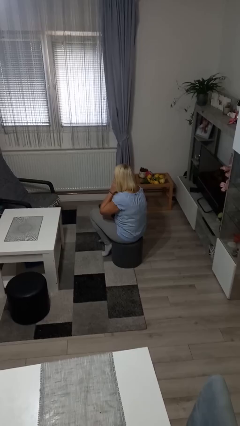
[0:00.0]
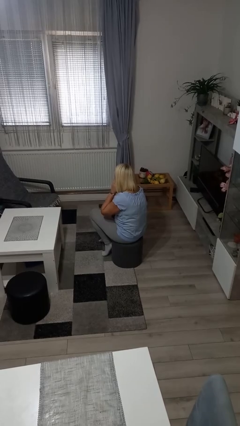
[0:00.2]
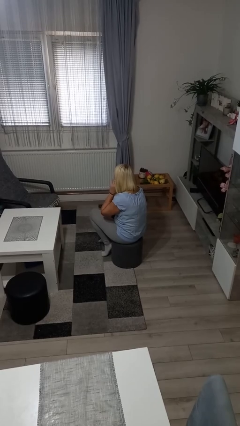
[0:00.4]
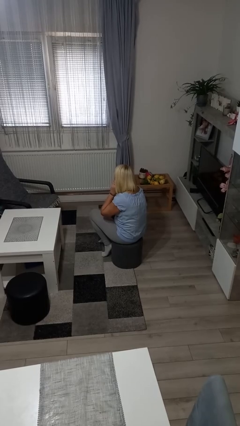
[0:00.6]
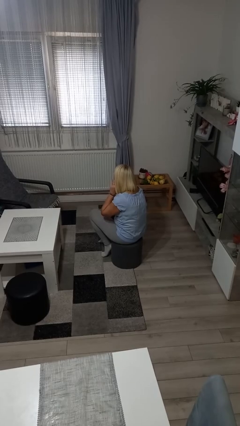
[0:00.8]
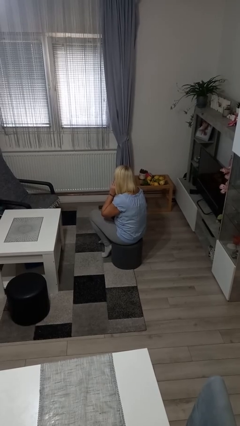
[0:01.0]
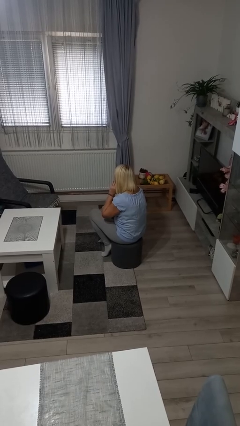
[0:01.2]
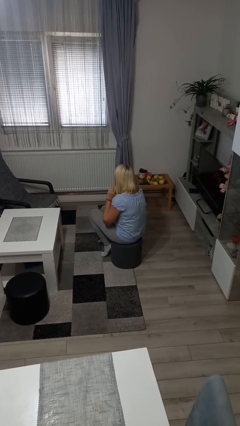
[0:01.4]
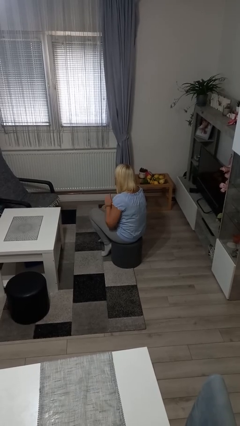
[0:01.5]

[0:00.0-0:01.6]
person touches earlobe

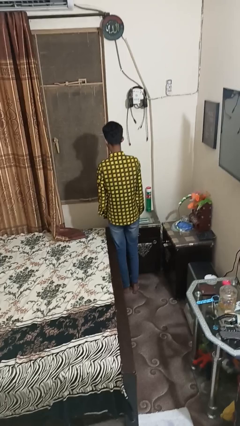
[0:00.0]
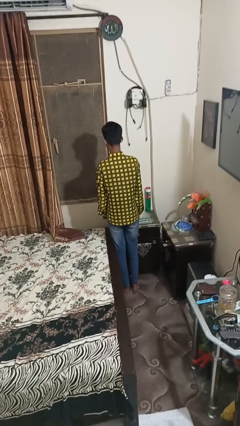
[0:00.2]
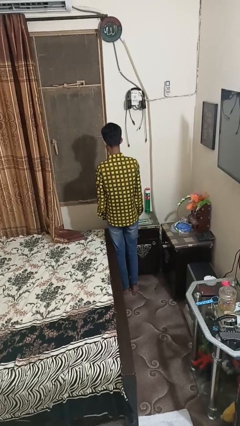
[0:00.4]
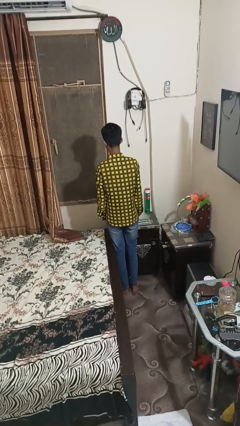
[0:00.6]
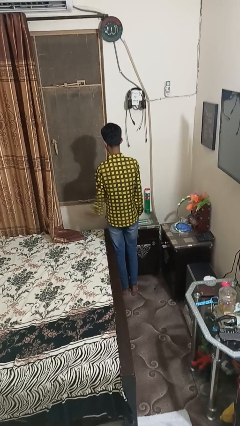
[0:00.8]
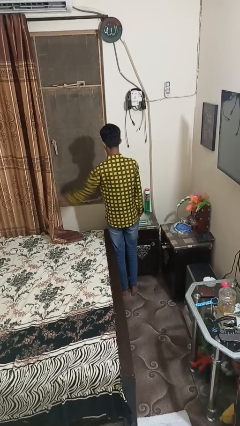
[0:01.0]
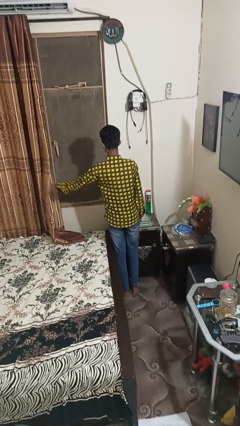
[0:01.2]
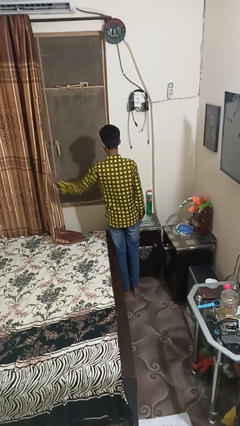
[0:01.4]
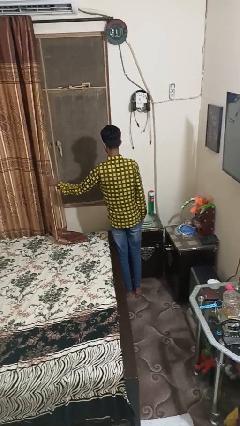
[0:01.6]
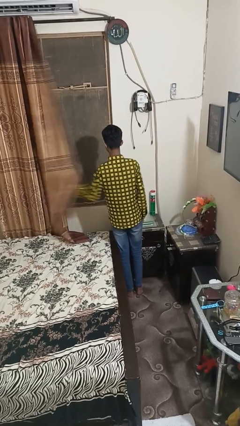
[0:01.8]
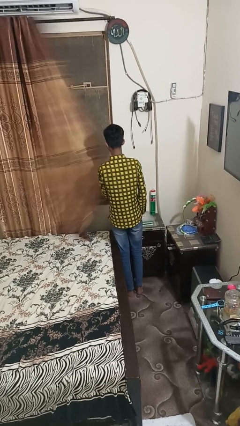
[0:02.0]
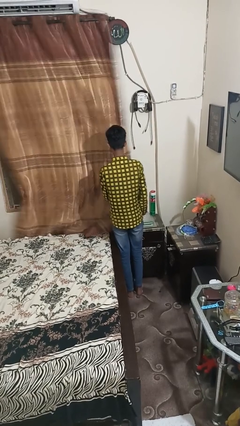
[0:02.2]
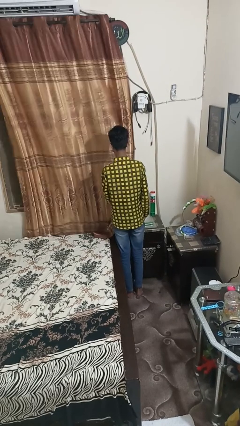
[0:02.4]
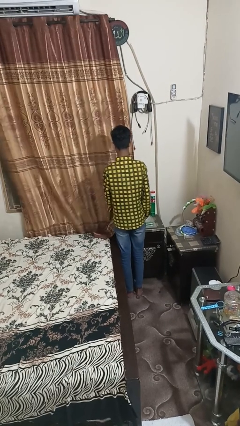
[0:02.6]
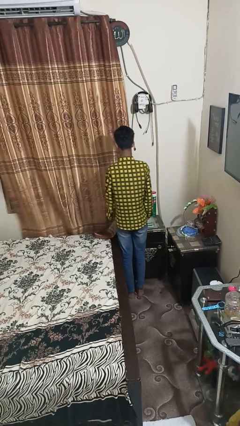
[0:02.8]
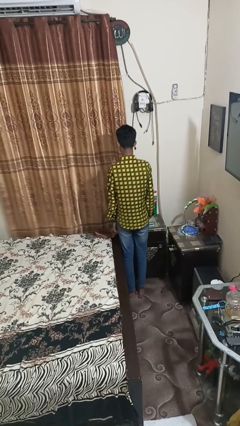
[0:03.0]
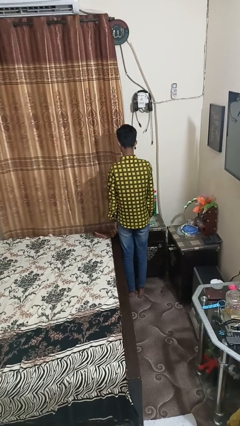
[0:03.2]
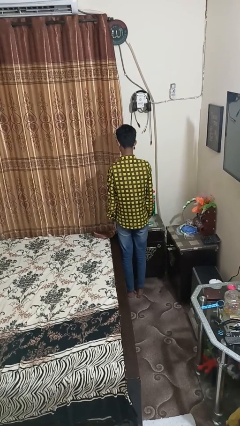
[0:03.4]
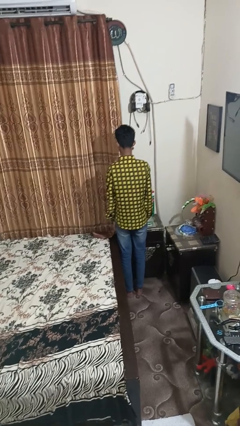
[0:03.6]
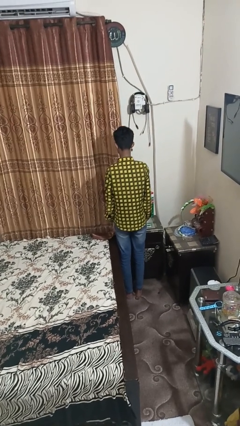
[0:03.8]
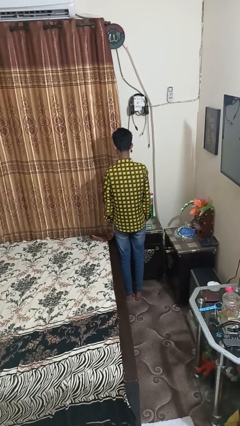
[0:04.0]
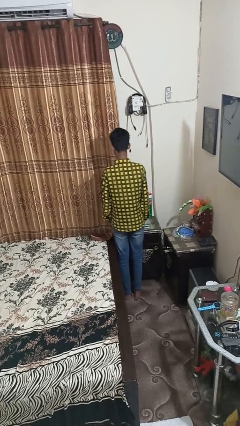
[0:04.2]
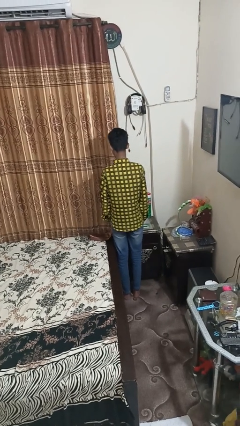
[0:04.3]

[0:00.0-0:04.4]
person closes curtains

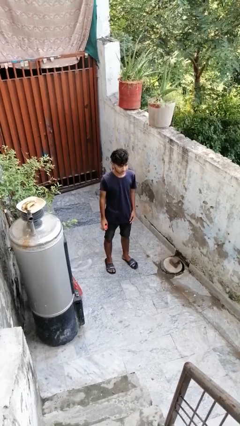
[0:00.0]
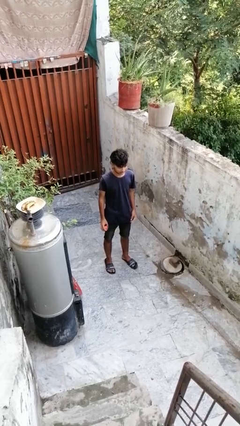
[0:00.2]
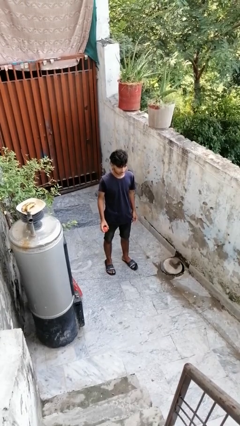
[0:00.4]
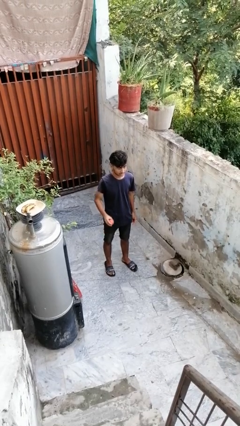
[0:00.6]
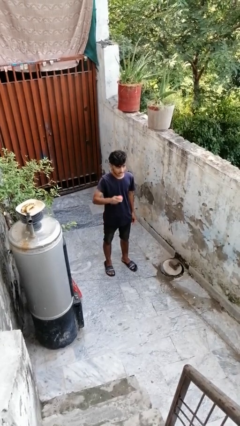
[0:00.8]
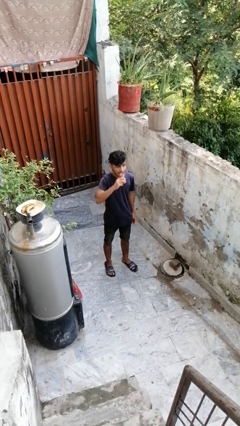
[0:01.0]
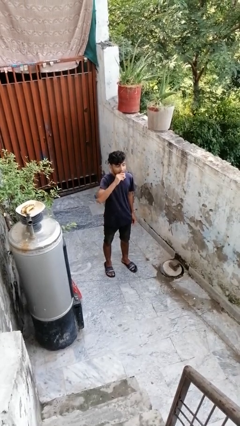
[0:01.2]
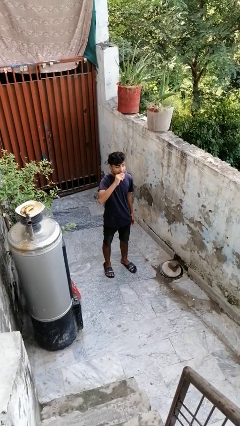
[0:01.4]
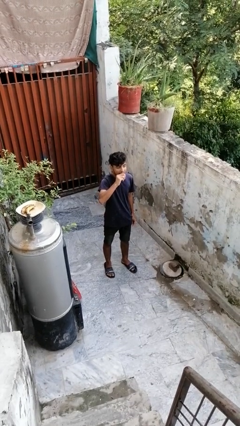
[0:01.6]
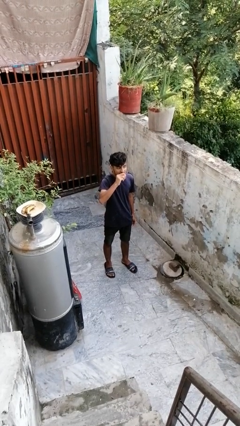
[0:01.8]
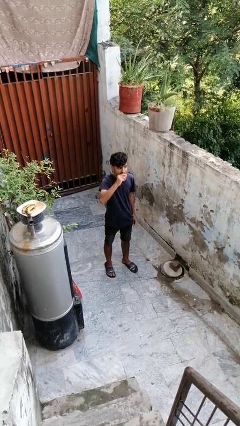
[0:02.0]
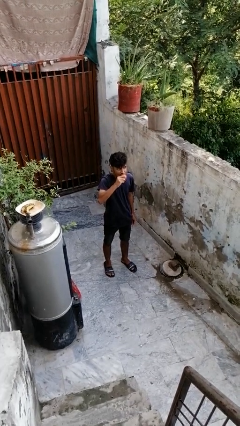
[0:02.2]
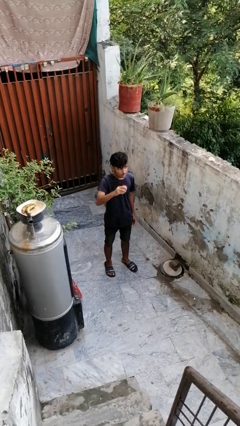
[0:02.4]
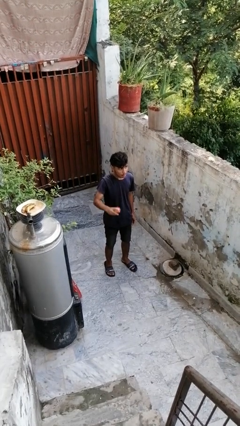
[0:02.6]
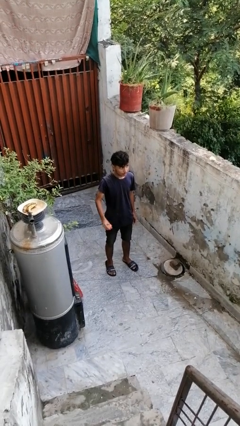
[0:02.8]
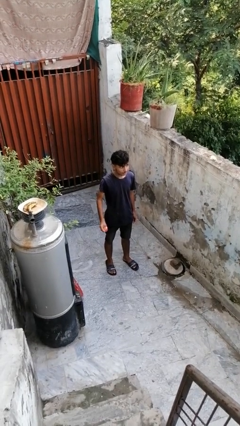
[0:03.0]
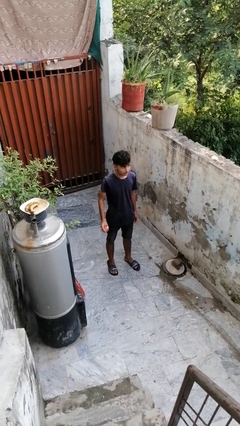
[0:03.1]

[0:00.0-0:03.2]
person eats apple

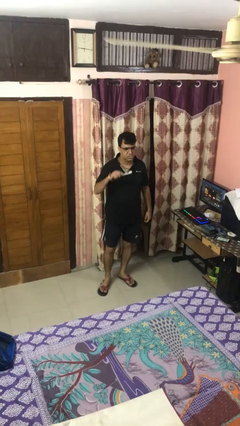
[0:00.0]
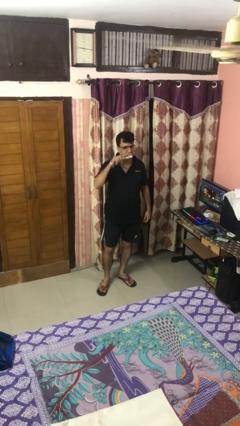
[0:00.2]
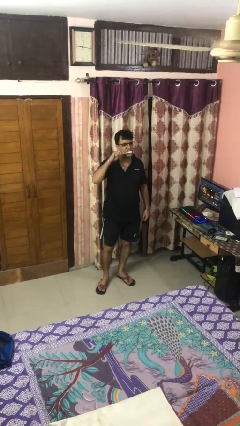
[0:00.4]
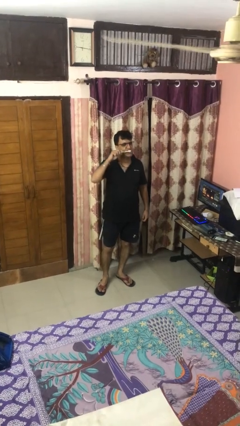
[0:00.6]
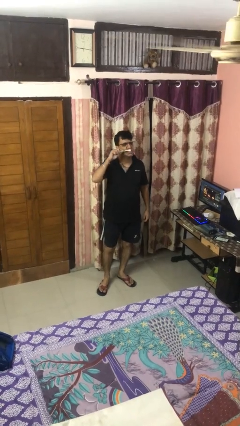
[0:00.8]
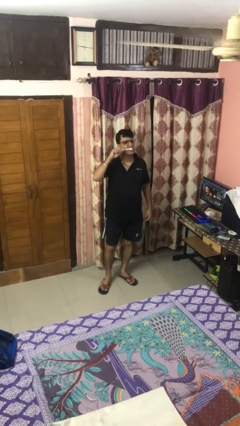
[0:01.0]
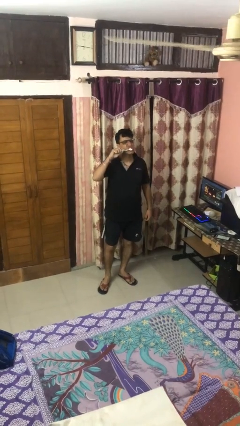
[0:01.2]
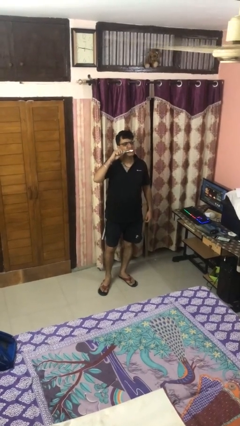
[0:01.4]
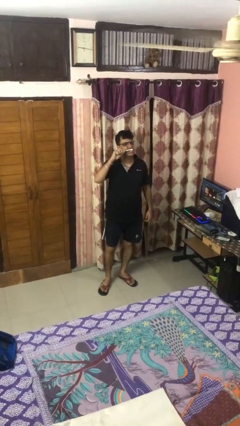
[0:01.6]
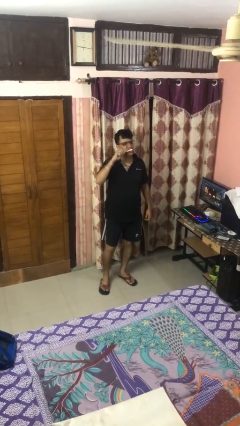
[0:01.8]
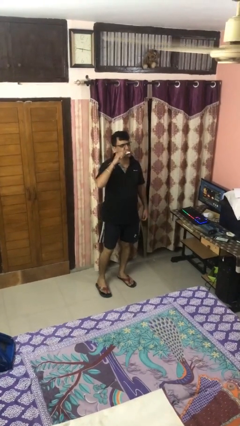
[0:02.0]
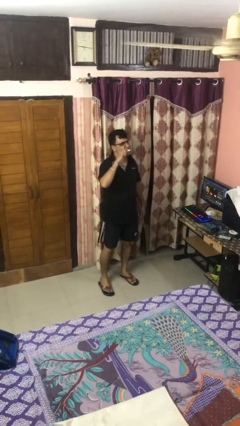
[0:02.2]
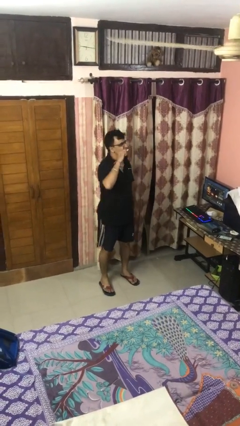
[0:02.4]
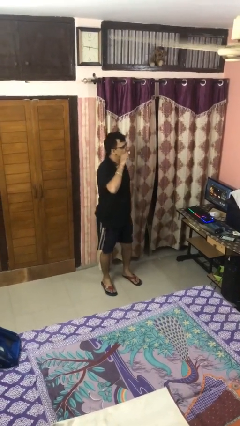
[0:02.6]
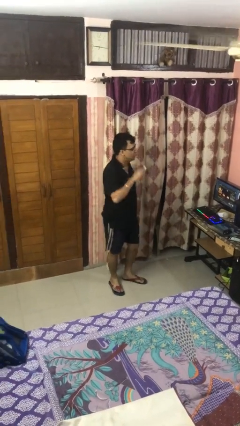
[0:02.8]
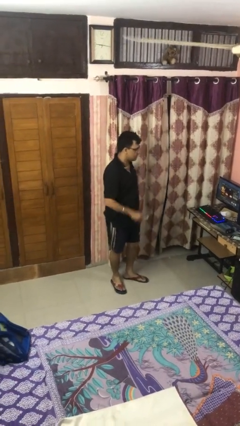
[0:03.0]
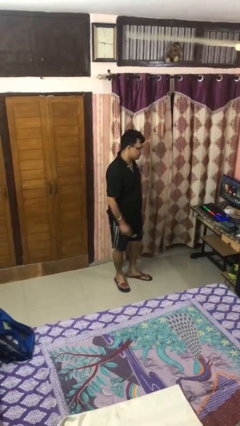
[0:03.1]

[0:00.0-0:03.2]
person brushes teeth

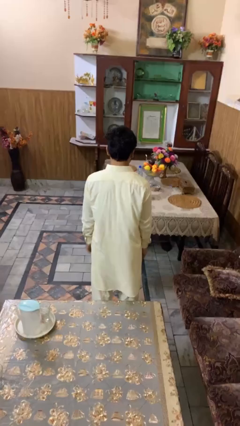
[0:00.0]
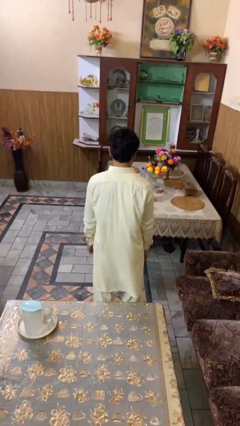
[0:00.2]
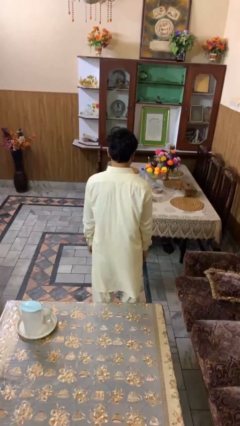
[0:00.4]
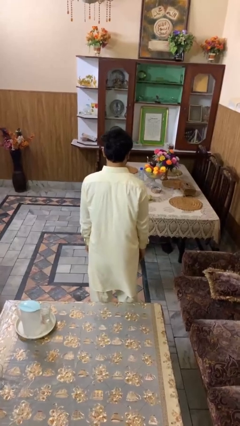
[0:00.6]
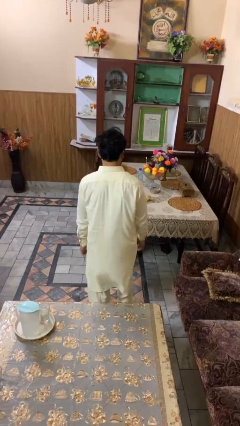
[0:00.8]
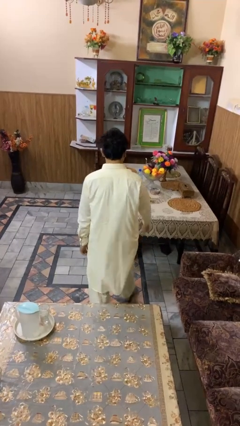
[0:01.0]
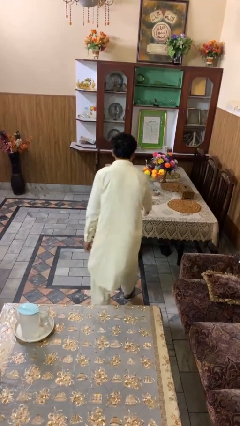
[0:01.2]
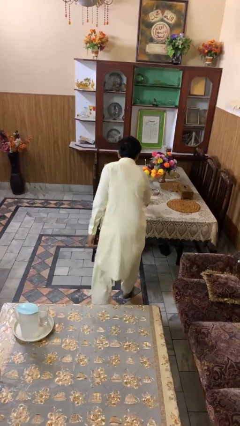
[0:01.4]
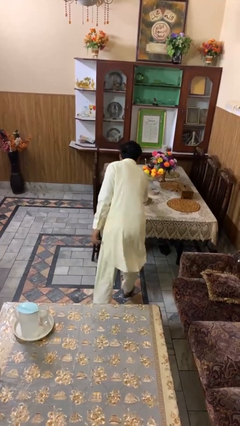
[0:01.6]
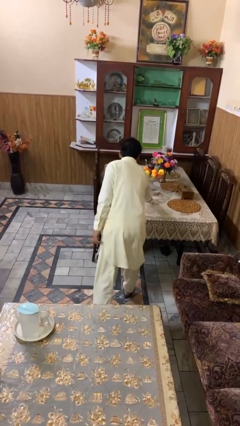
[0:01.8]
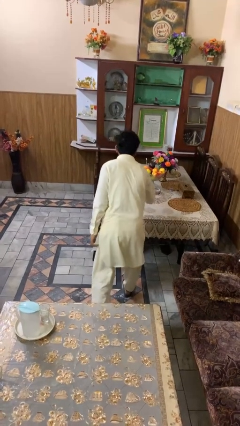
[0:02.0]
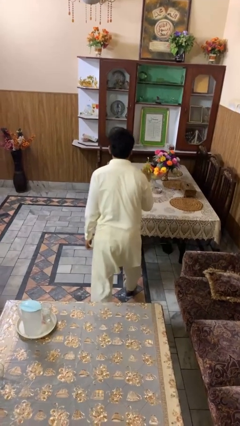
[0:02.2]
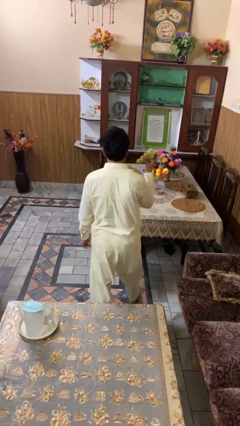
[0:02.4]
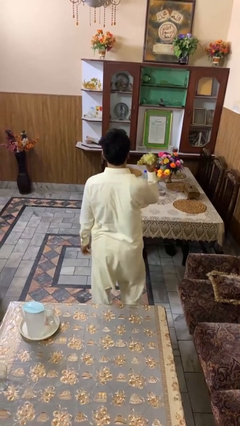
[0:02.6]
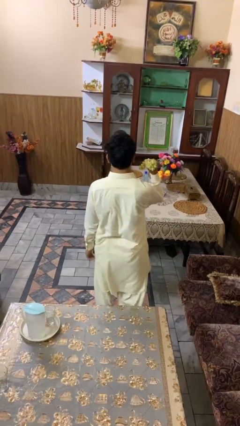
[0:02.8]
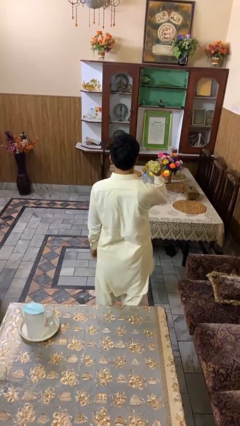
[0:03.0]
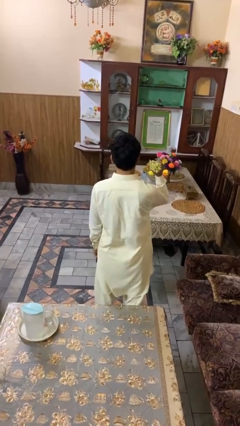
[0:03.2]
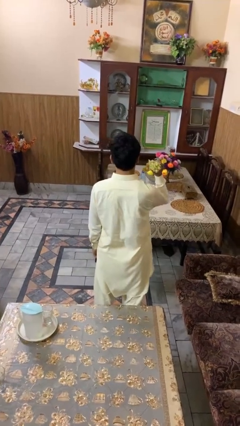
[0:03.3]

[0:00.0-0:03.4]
person picks up object from table

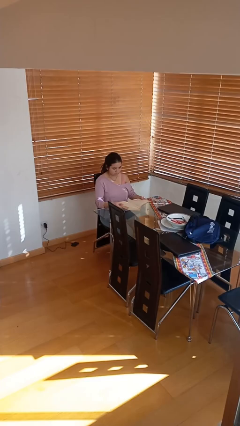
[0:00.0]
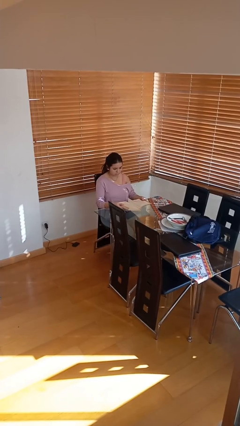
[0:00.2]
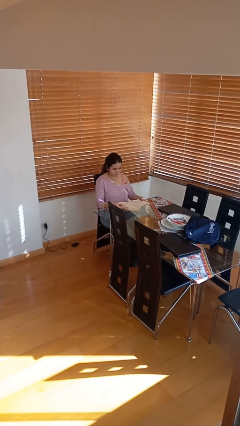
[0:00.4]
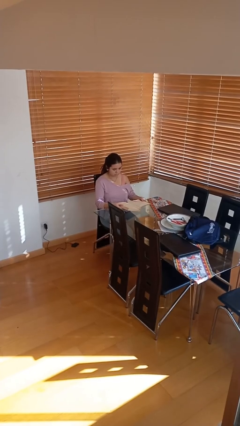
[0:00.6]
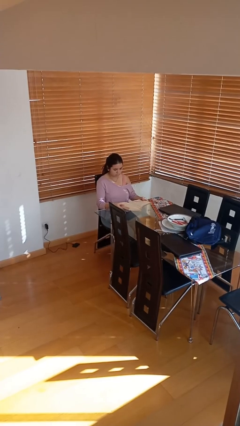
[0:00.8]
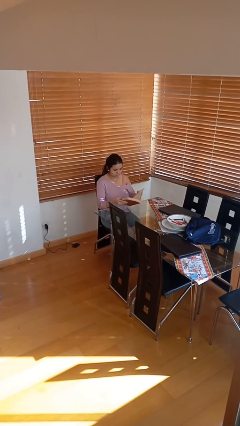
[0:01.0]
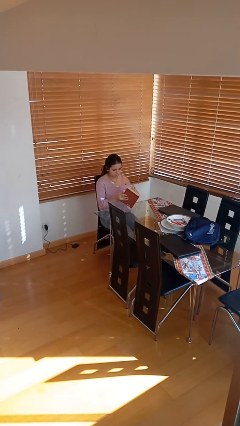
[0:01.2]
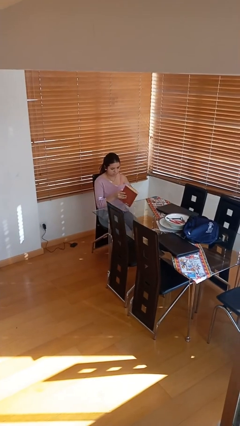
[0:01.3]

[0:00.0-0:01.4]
person reads document
